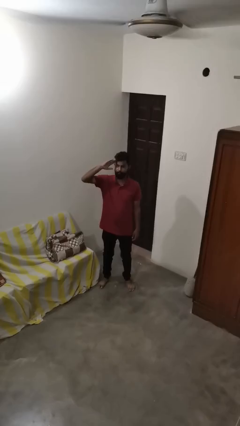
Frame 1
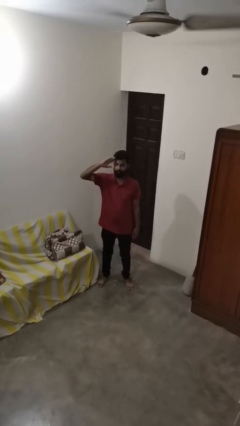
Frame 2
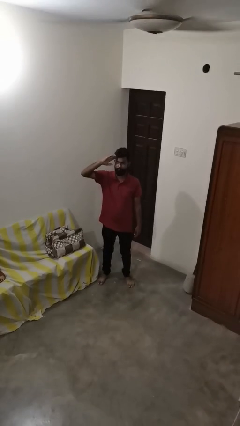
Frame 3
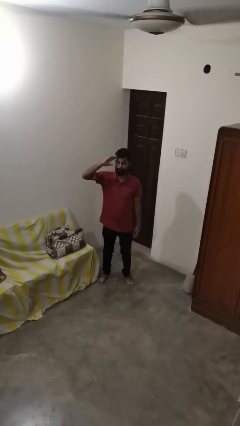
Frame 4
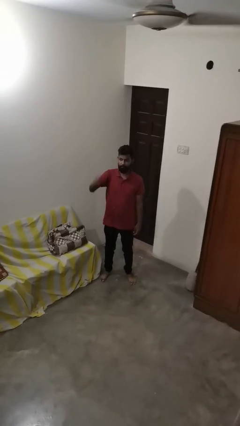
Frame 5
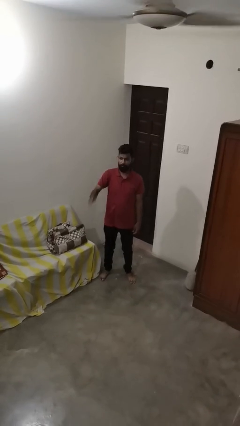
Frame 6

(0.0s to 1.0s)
person salutes

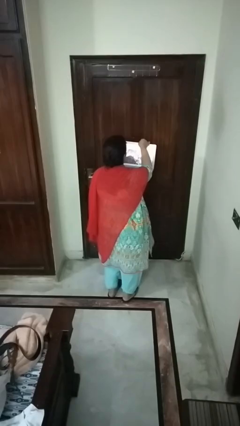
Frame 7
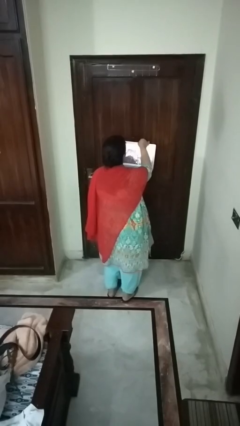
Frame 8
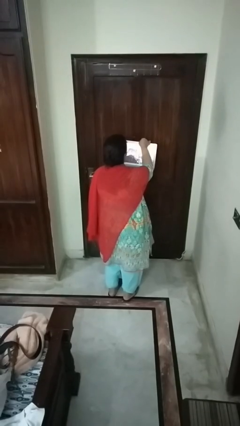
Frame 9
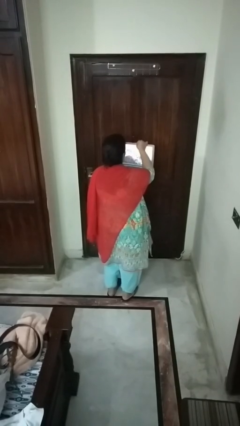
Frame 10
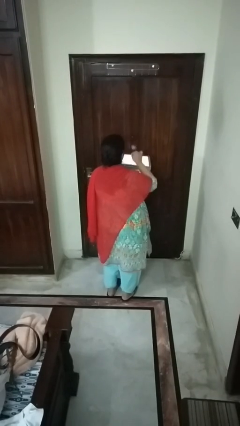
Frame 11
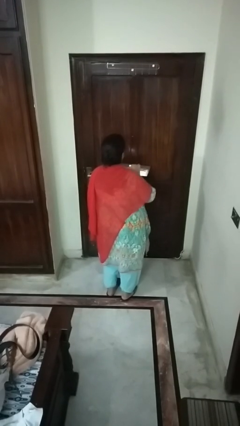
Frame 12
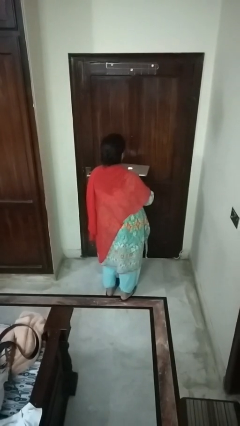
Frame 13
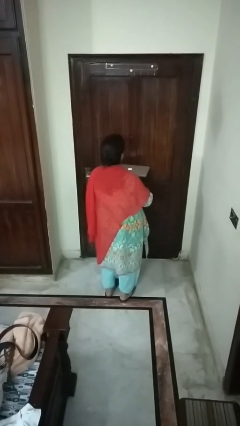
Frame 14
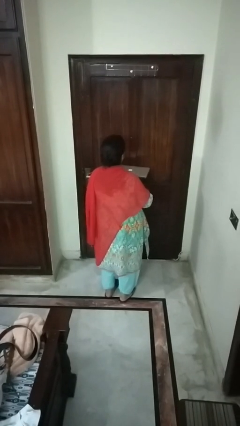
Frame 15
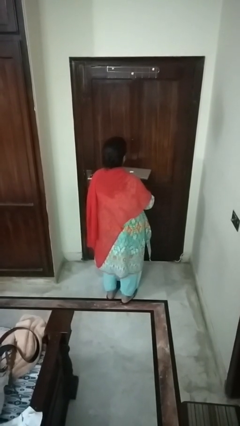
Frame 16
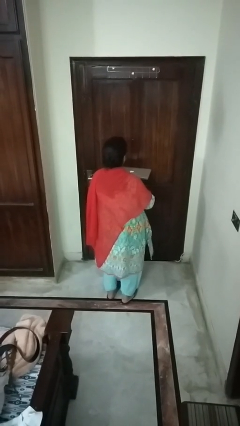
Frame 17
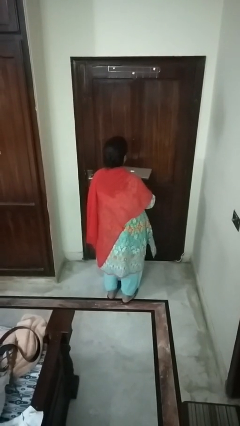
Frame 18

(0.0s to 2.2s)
person closes laptop

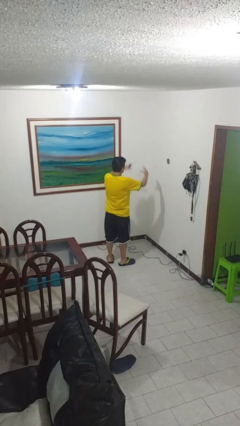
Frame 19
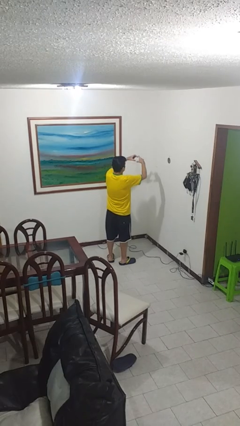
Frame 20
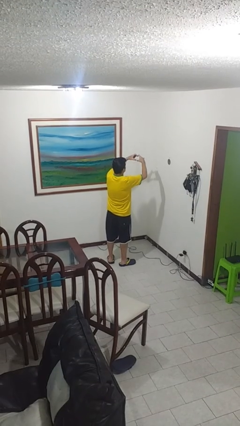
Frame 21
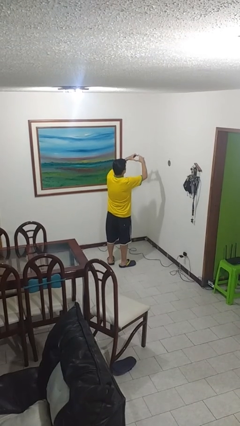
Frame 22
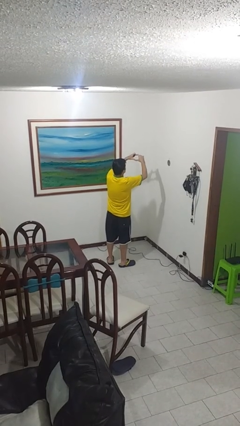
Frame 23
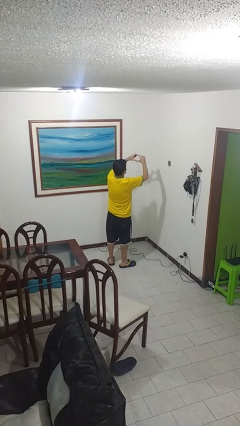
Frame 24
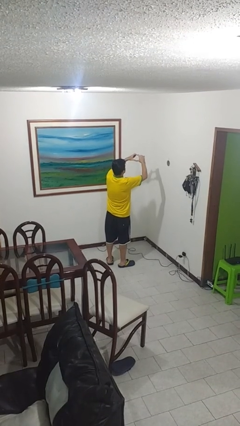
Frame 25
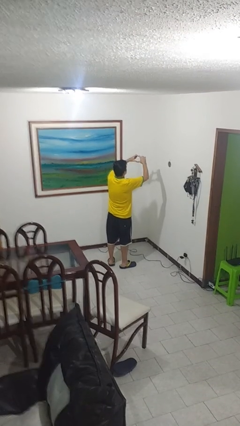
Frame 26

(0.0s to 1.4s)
person gestures heart

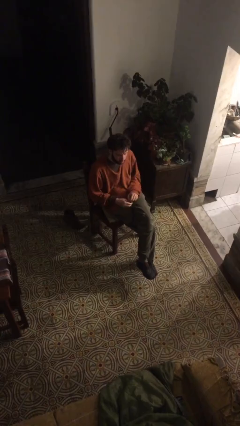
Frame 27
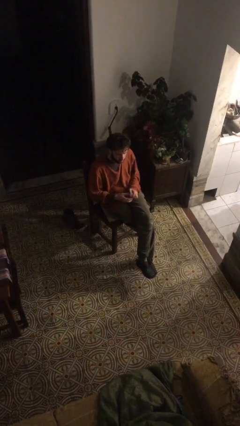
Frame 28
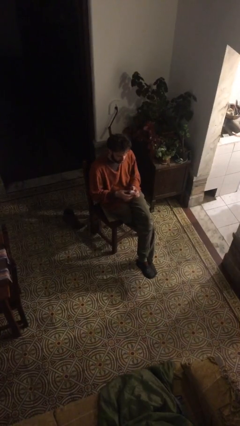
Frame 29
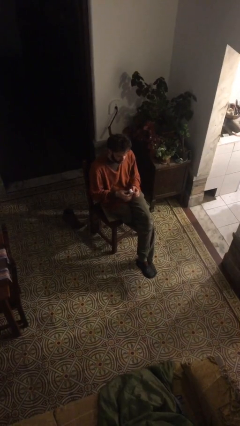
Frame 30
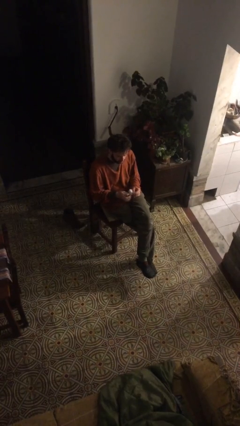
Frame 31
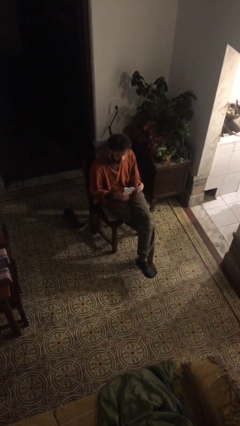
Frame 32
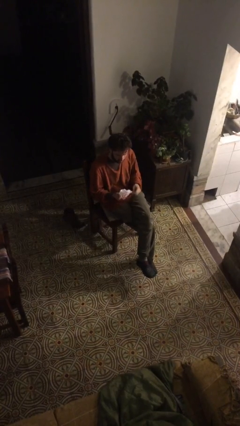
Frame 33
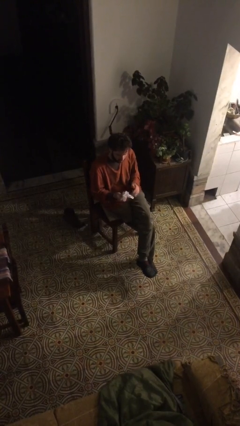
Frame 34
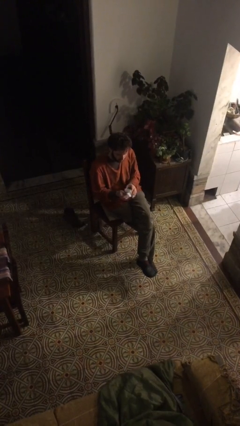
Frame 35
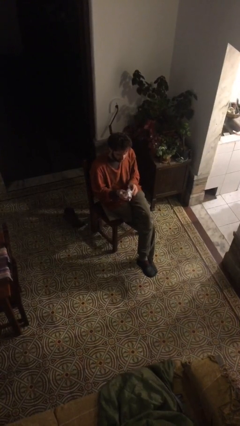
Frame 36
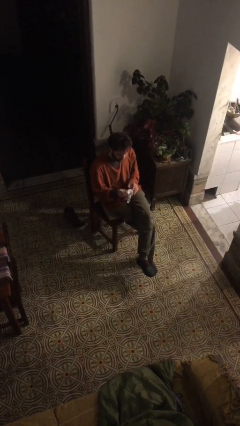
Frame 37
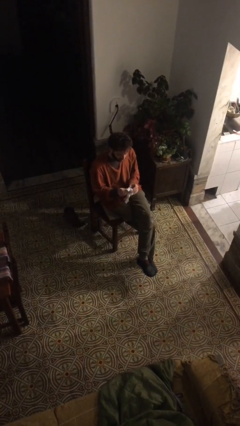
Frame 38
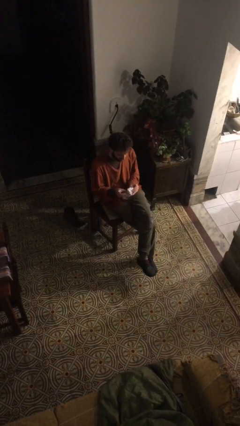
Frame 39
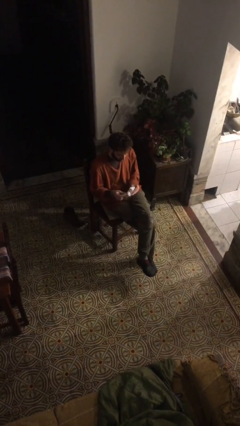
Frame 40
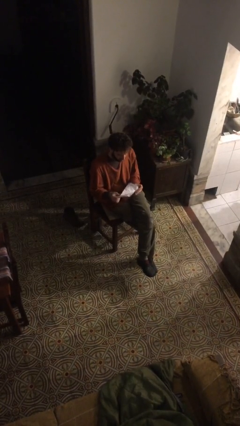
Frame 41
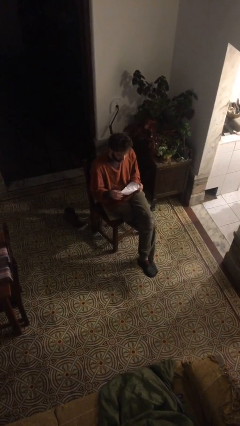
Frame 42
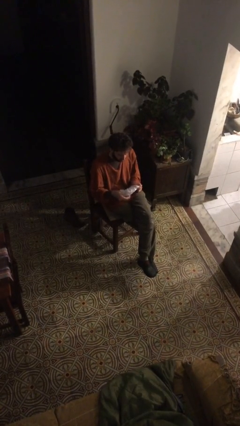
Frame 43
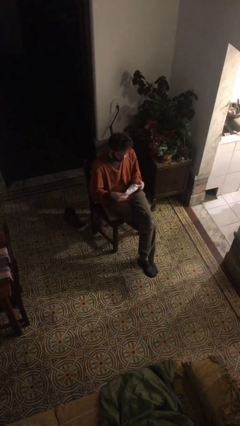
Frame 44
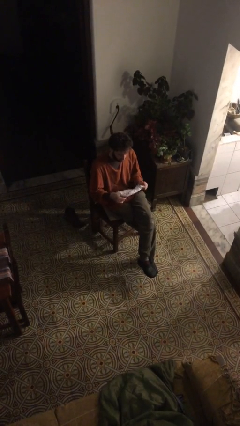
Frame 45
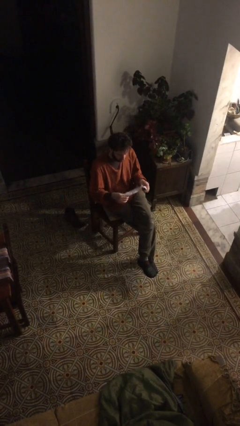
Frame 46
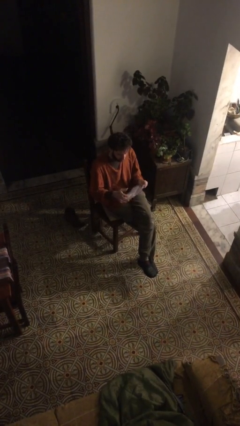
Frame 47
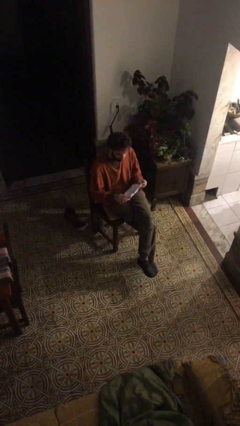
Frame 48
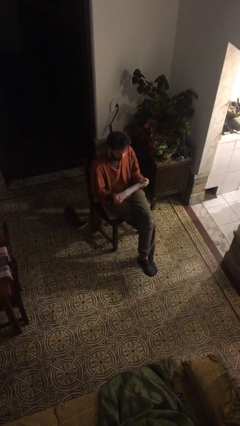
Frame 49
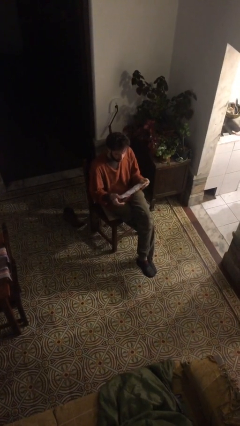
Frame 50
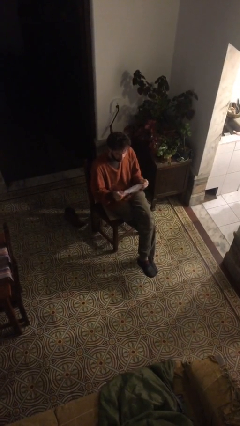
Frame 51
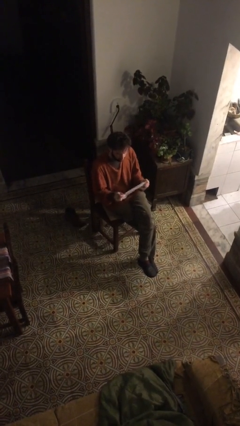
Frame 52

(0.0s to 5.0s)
person crumples paper

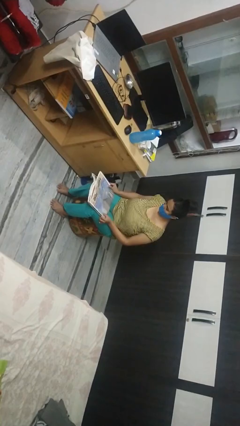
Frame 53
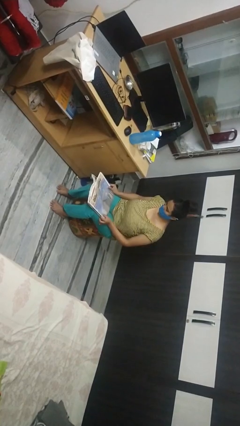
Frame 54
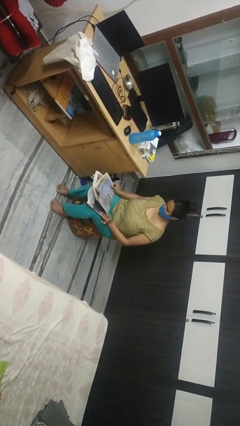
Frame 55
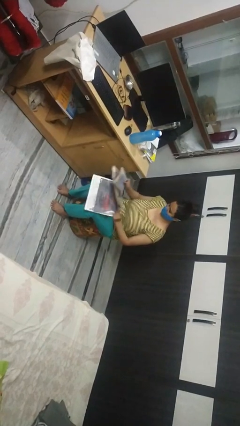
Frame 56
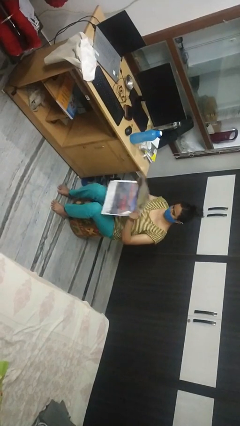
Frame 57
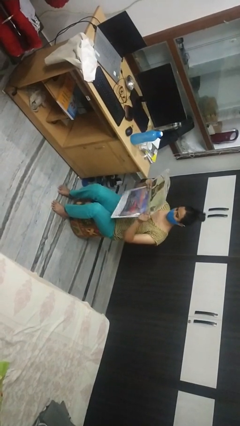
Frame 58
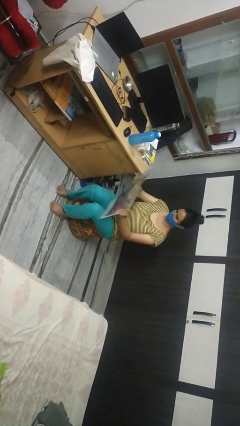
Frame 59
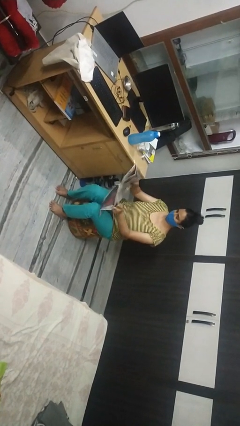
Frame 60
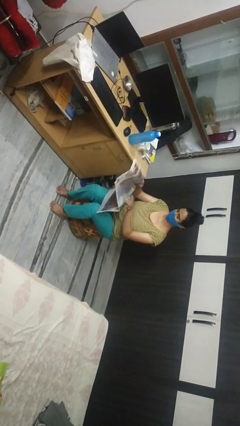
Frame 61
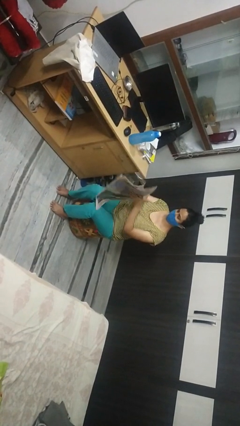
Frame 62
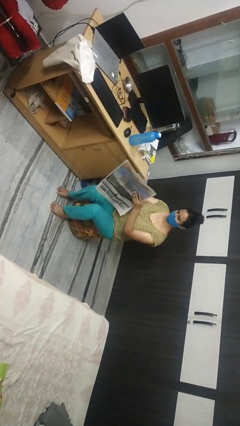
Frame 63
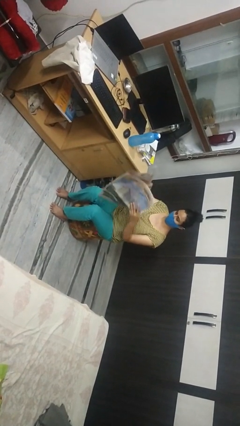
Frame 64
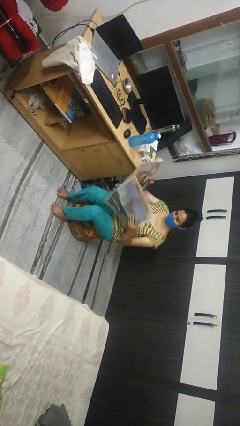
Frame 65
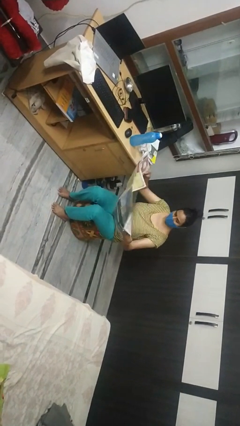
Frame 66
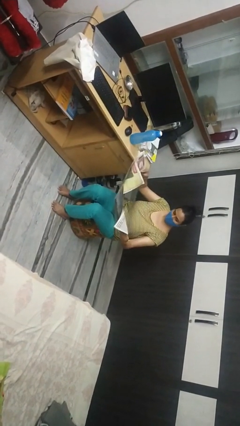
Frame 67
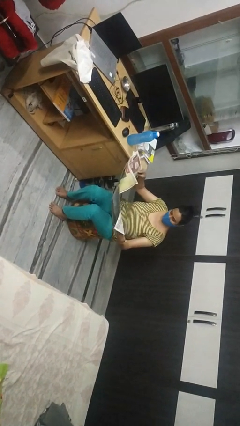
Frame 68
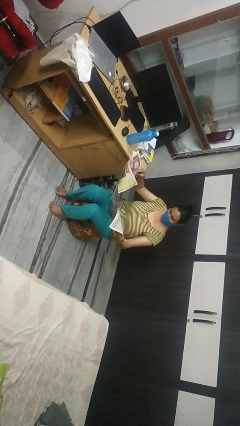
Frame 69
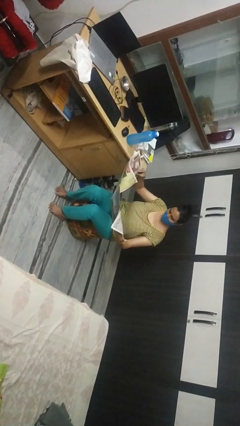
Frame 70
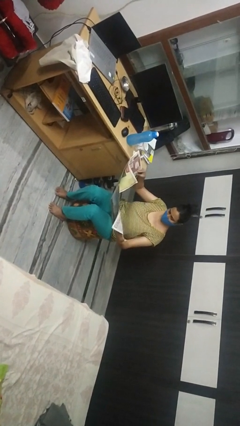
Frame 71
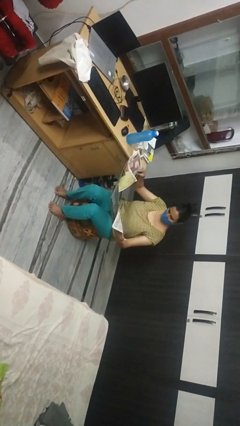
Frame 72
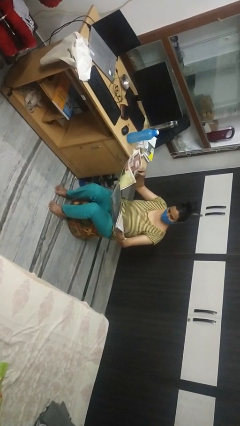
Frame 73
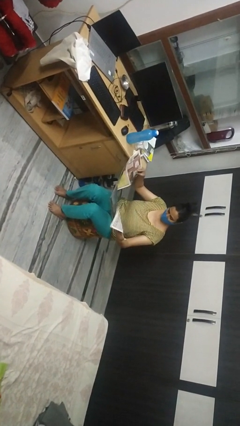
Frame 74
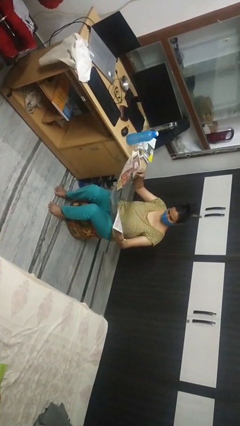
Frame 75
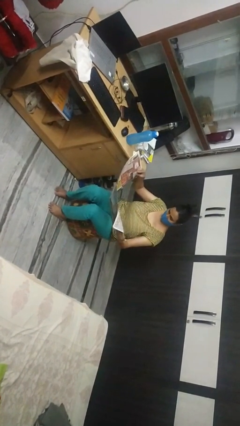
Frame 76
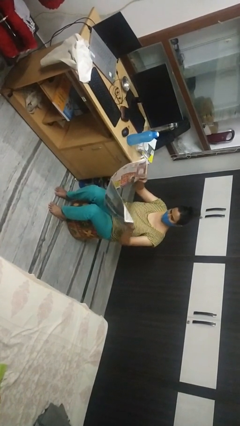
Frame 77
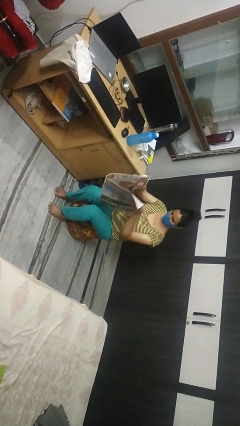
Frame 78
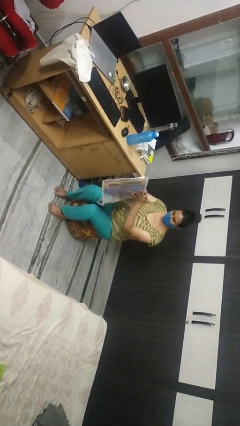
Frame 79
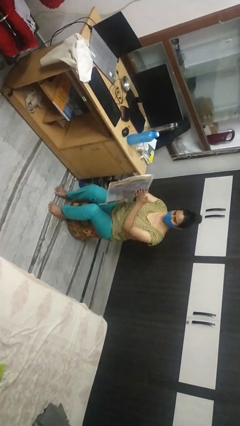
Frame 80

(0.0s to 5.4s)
person reads newspaper

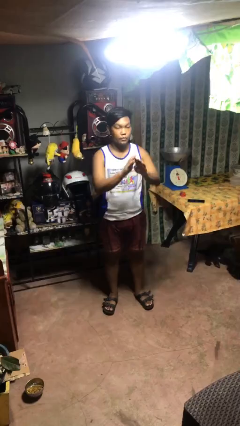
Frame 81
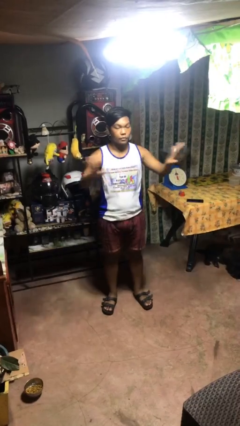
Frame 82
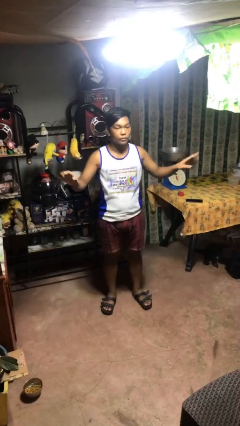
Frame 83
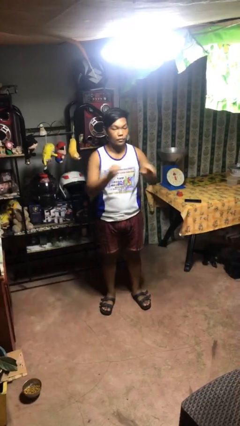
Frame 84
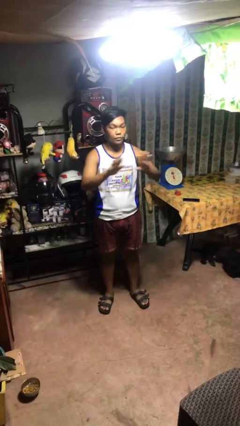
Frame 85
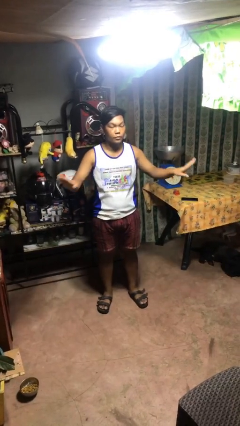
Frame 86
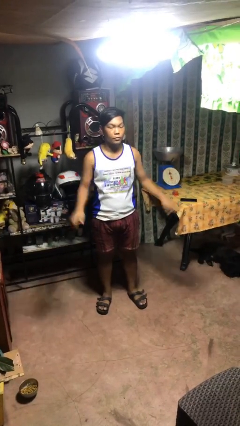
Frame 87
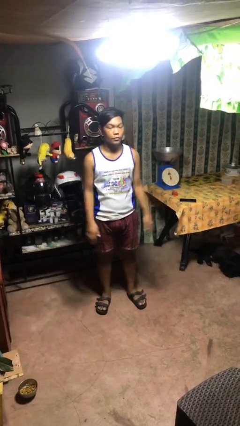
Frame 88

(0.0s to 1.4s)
person gestures zoom in

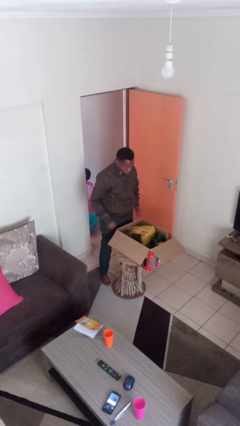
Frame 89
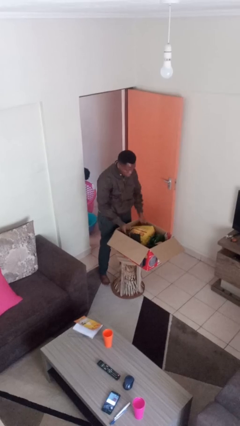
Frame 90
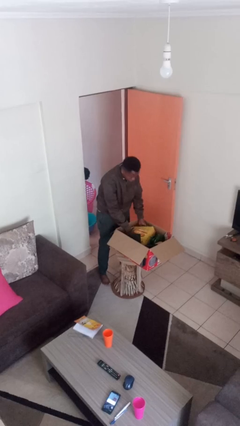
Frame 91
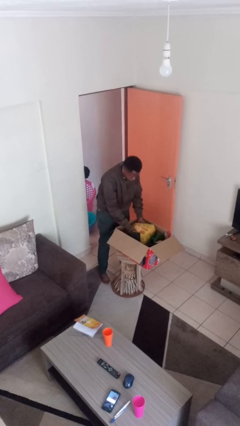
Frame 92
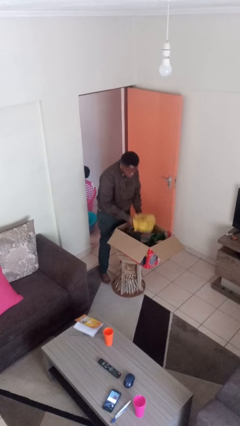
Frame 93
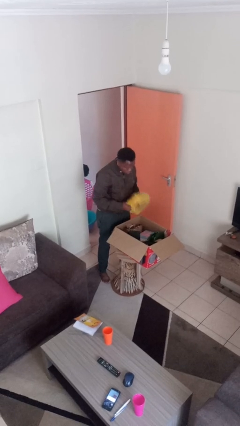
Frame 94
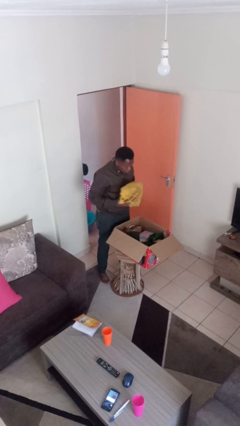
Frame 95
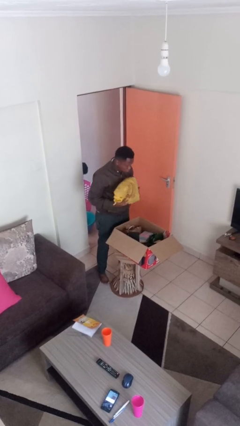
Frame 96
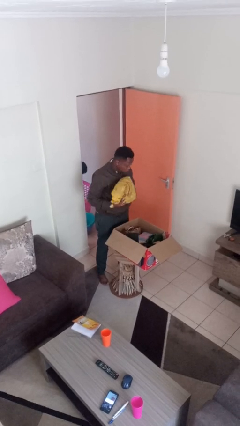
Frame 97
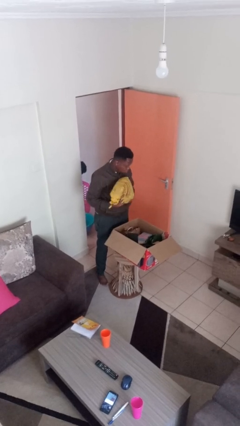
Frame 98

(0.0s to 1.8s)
person takes object from box
